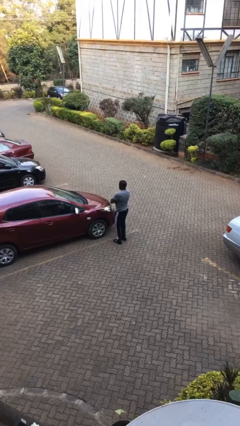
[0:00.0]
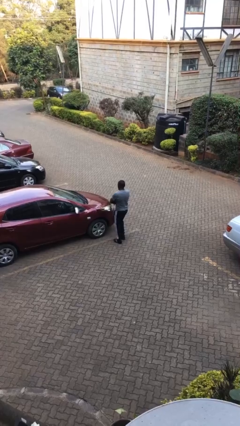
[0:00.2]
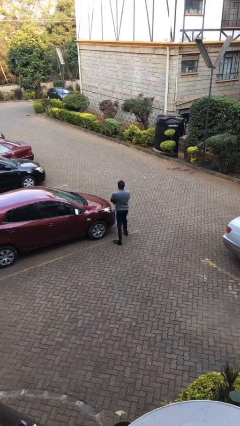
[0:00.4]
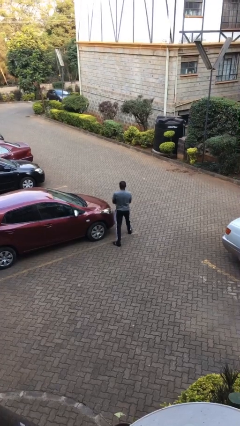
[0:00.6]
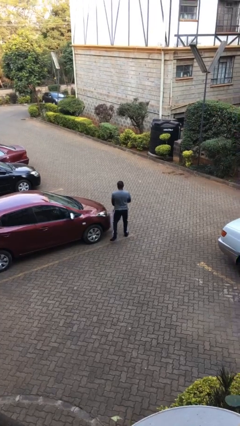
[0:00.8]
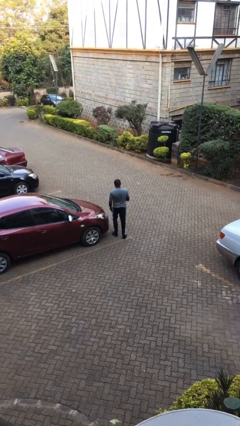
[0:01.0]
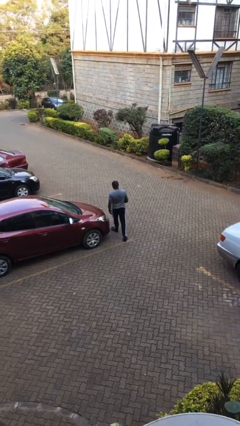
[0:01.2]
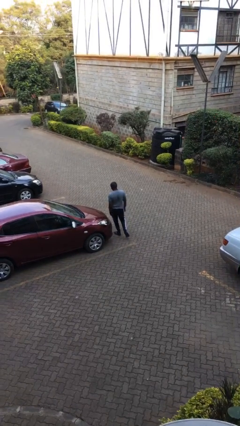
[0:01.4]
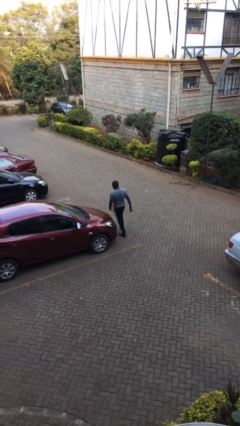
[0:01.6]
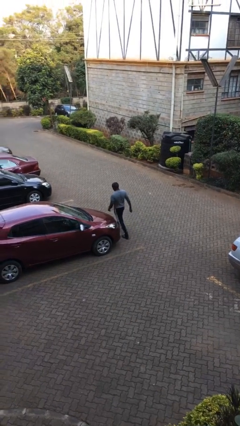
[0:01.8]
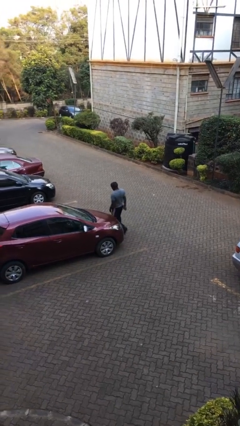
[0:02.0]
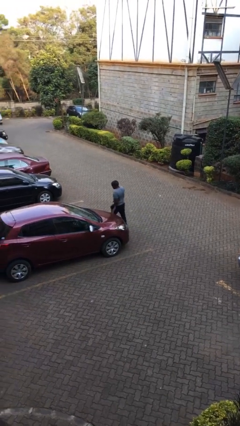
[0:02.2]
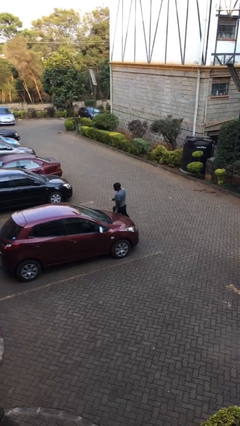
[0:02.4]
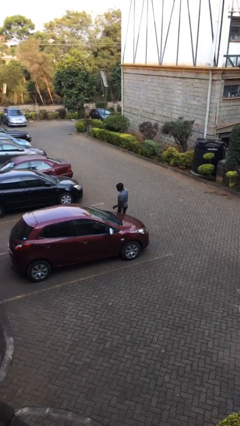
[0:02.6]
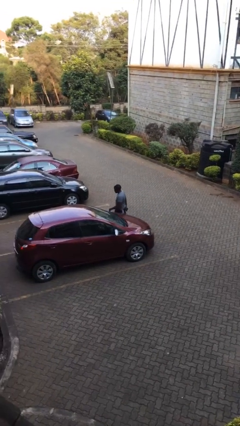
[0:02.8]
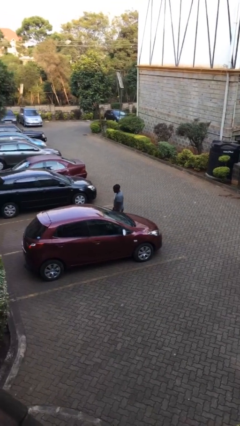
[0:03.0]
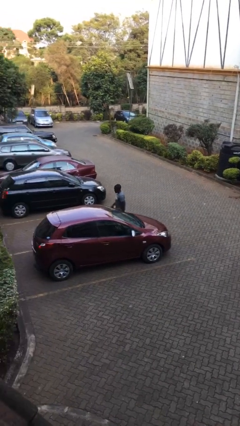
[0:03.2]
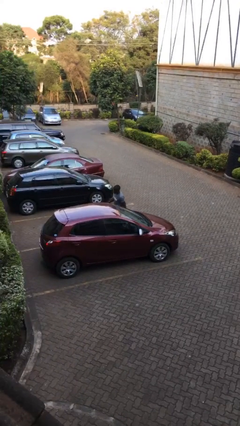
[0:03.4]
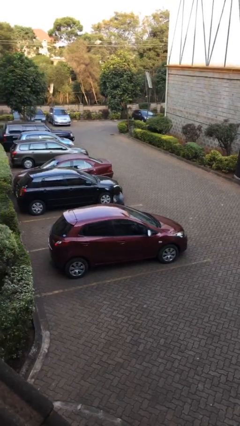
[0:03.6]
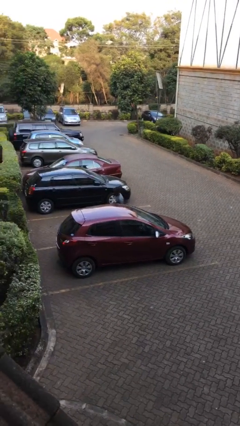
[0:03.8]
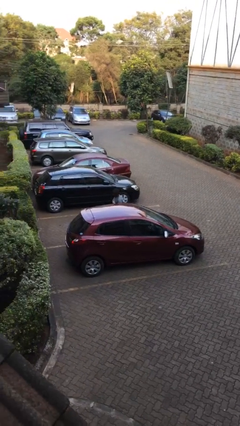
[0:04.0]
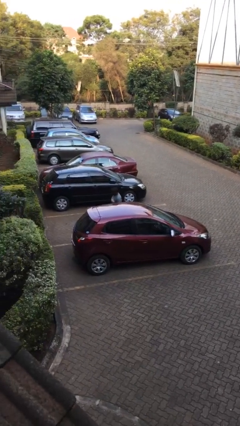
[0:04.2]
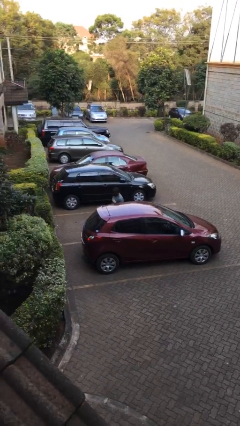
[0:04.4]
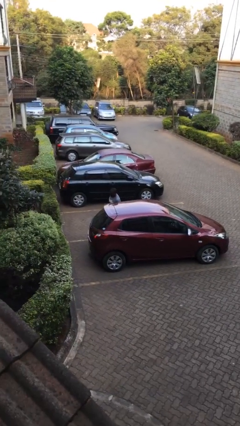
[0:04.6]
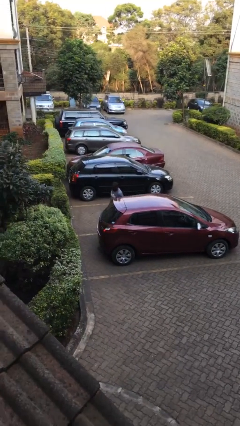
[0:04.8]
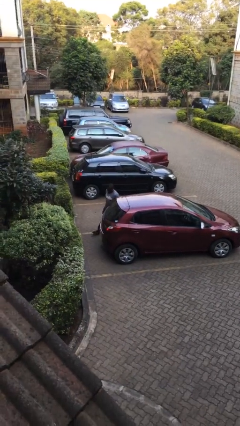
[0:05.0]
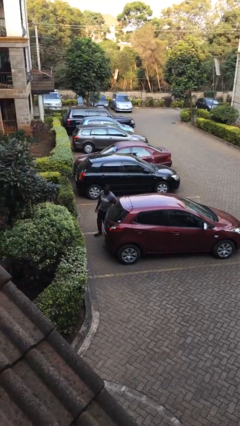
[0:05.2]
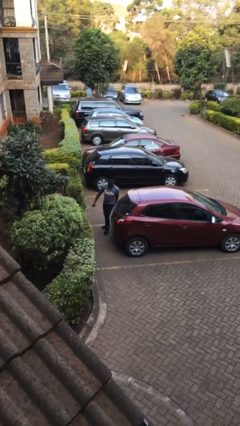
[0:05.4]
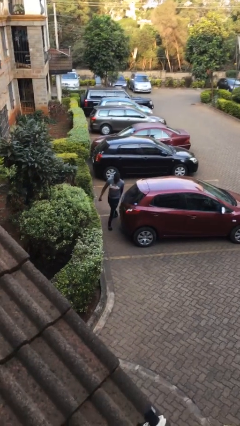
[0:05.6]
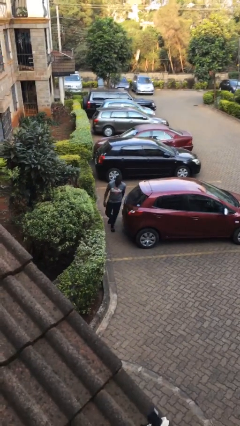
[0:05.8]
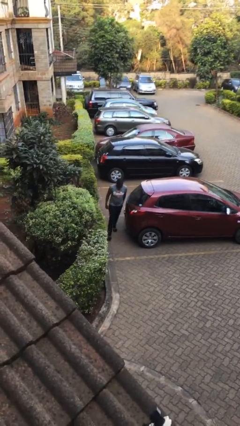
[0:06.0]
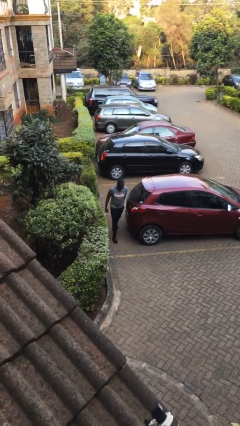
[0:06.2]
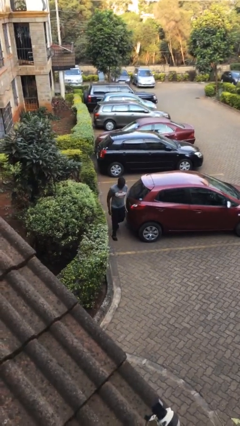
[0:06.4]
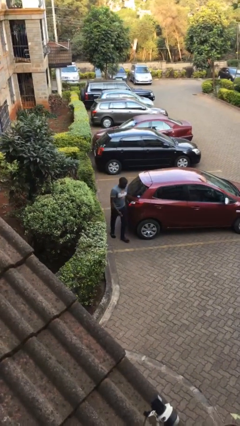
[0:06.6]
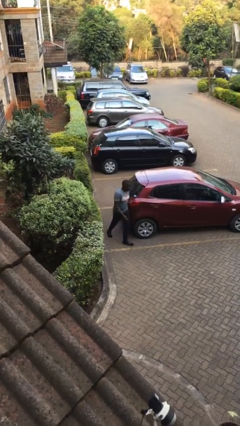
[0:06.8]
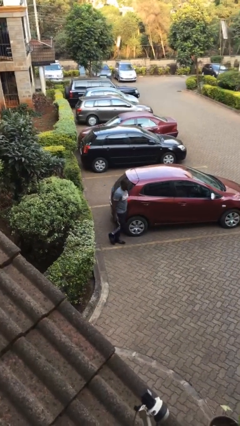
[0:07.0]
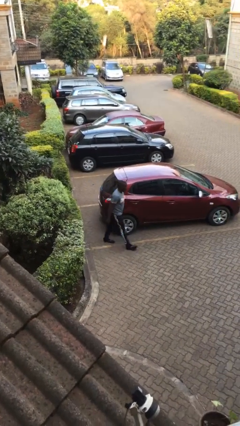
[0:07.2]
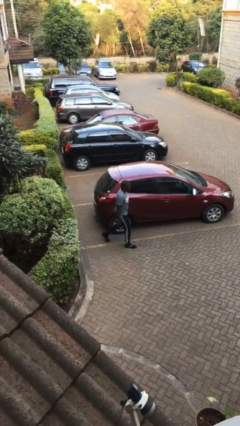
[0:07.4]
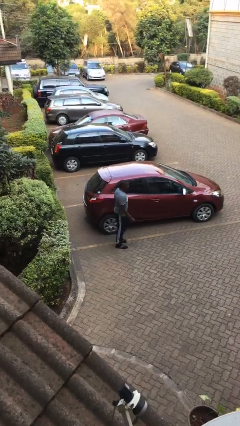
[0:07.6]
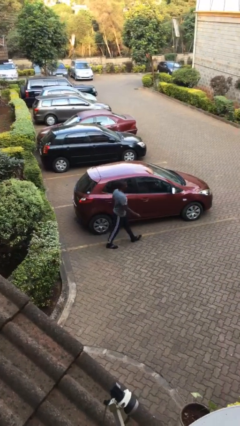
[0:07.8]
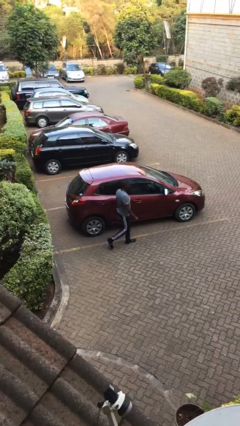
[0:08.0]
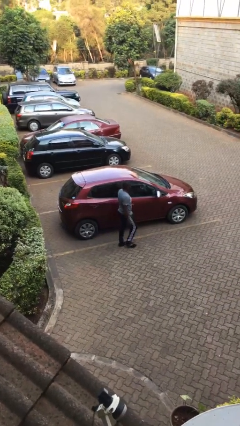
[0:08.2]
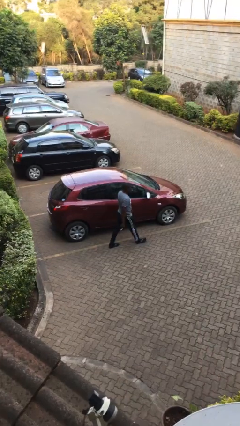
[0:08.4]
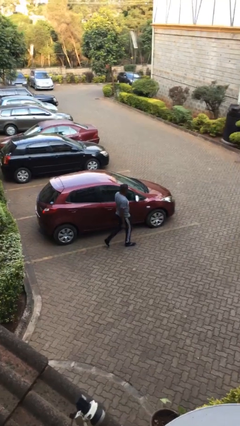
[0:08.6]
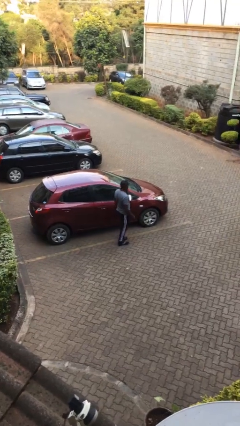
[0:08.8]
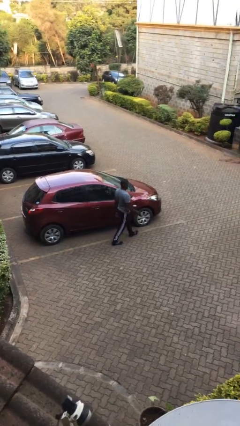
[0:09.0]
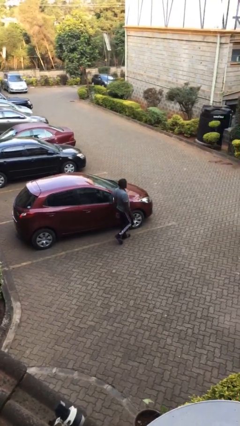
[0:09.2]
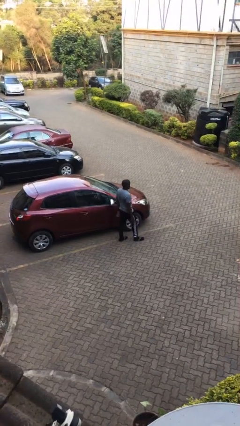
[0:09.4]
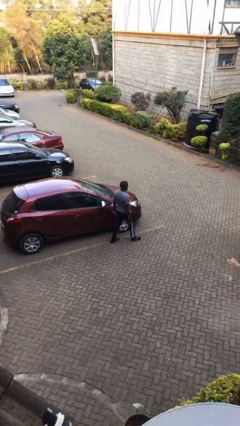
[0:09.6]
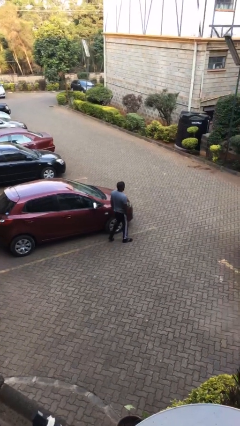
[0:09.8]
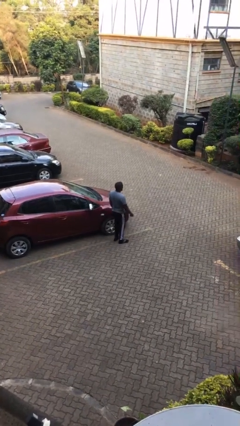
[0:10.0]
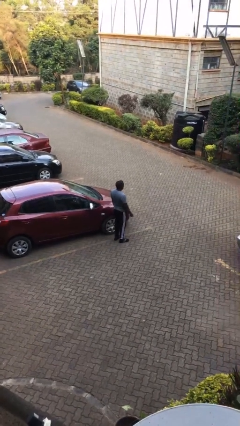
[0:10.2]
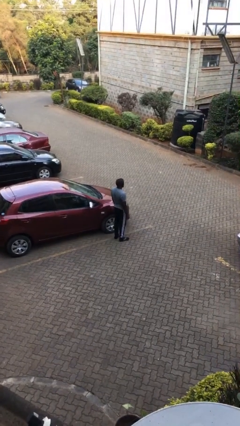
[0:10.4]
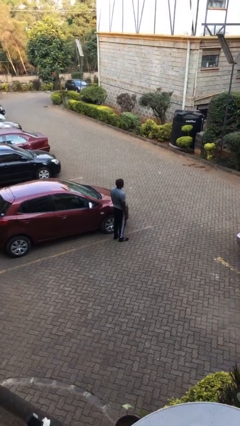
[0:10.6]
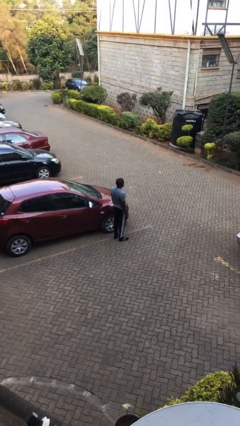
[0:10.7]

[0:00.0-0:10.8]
person walks around car

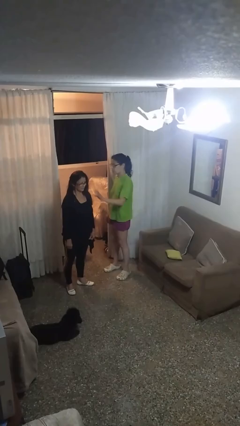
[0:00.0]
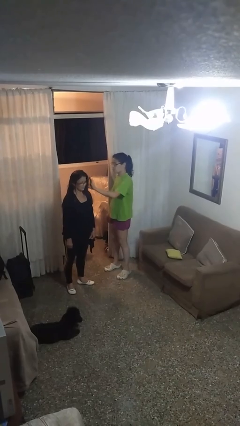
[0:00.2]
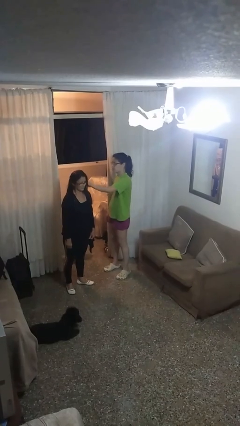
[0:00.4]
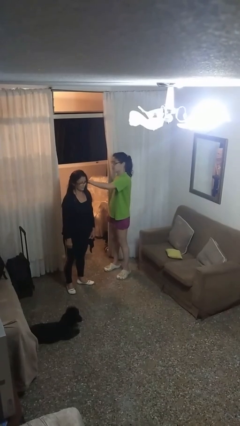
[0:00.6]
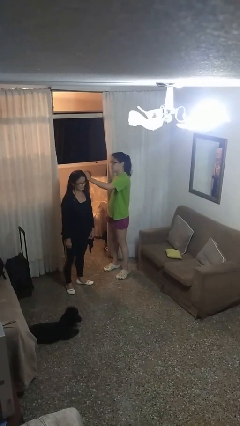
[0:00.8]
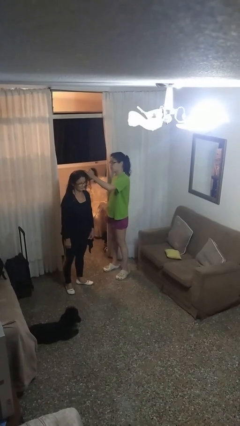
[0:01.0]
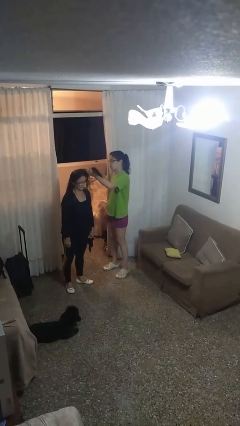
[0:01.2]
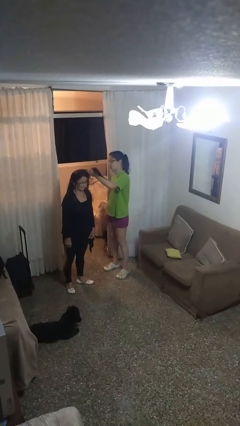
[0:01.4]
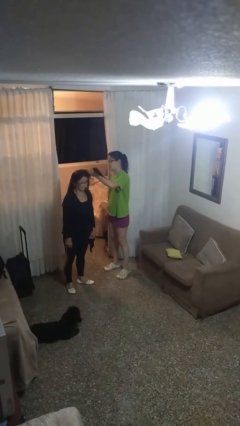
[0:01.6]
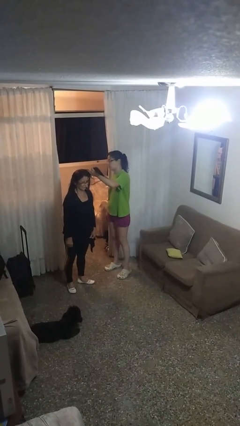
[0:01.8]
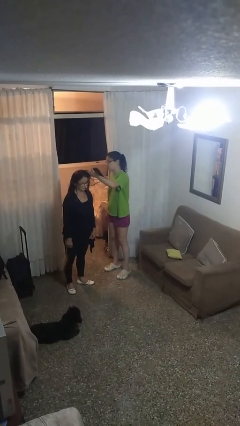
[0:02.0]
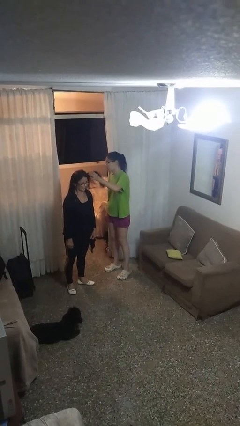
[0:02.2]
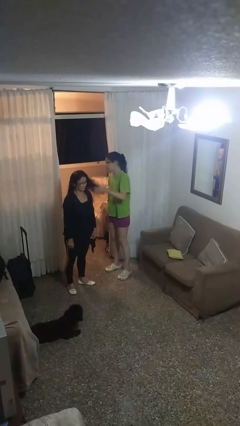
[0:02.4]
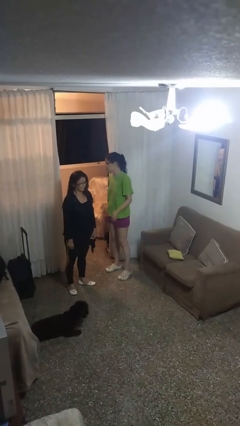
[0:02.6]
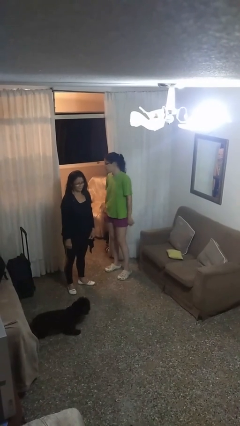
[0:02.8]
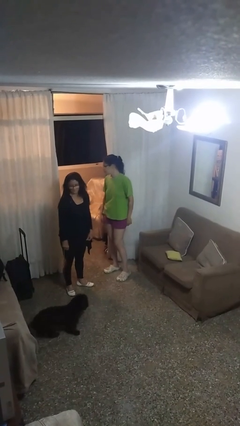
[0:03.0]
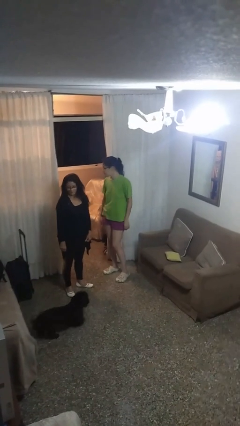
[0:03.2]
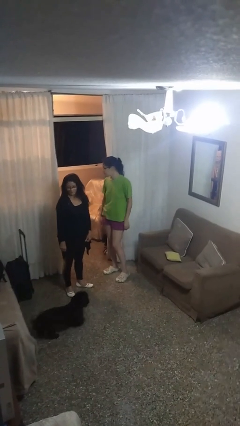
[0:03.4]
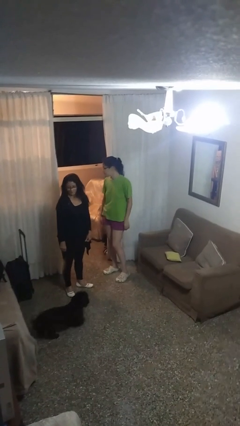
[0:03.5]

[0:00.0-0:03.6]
person grabs person by hair

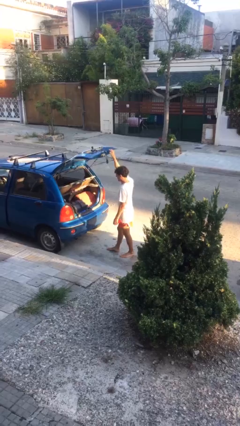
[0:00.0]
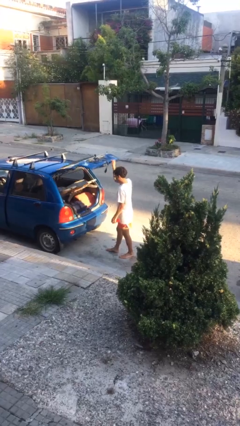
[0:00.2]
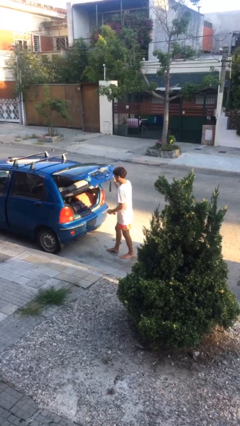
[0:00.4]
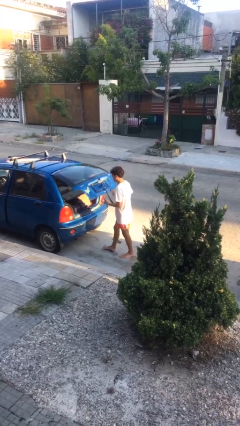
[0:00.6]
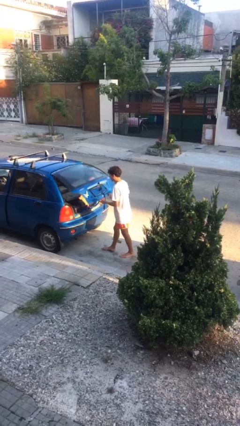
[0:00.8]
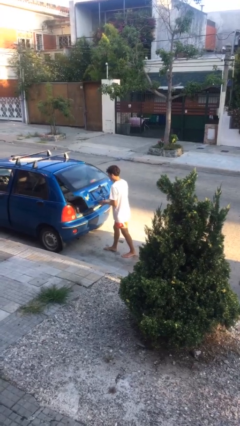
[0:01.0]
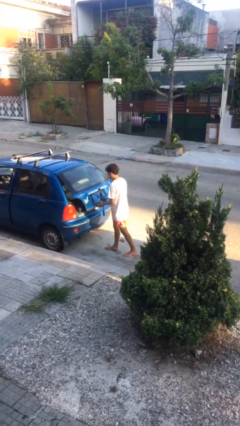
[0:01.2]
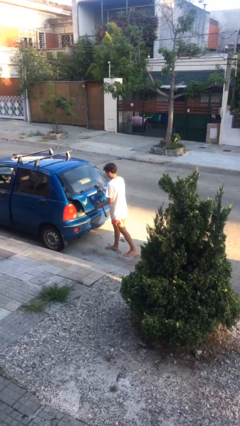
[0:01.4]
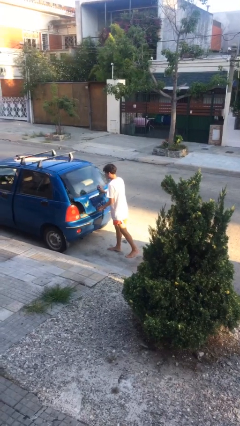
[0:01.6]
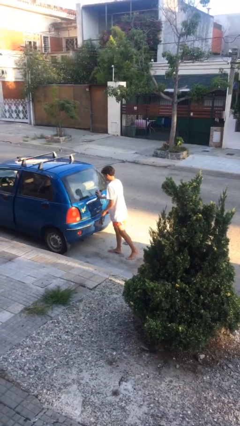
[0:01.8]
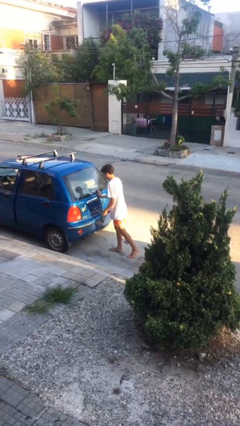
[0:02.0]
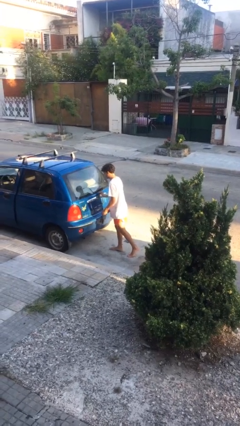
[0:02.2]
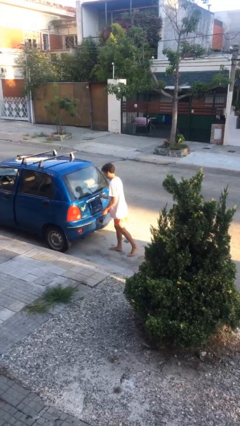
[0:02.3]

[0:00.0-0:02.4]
person closes car trunk

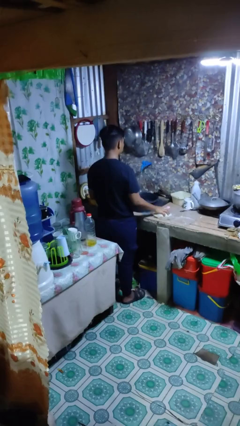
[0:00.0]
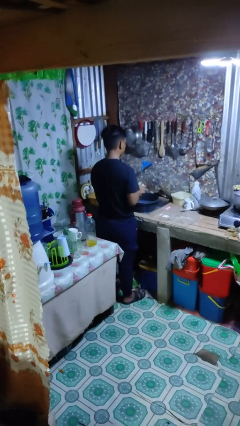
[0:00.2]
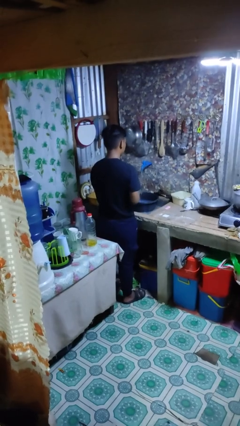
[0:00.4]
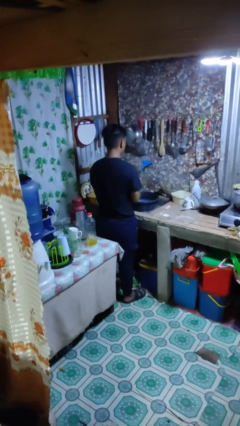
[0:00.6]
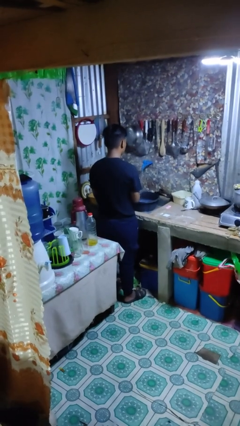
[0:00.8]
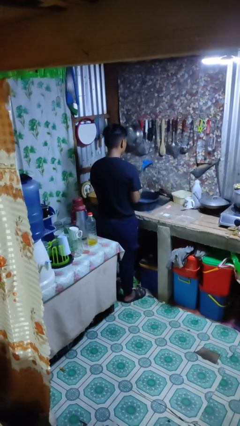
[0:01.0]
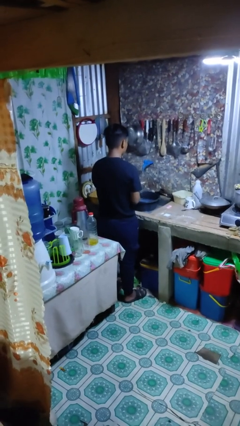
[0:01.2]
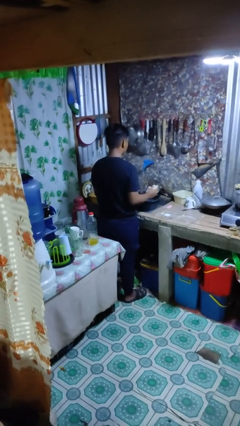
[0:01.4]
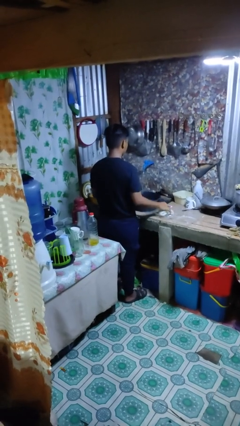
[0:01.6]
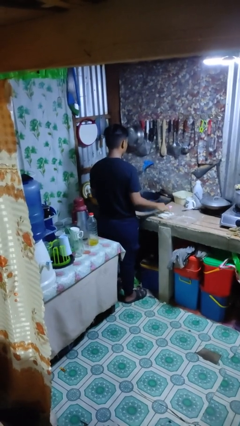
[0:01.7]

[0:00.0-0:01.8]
person dries hands with towel
